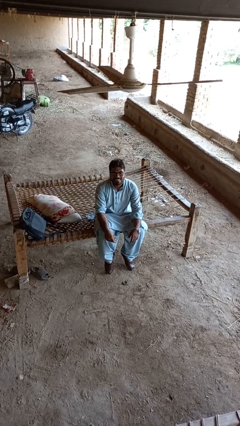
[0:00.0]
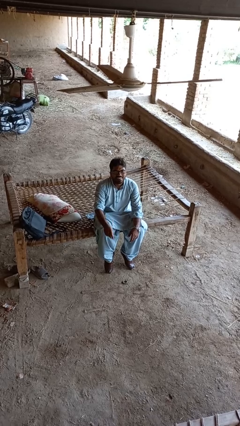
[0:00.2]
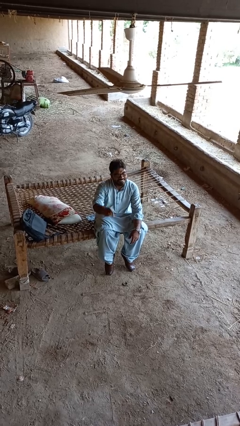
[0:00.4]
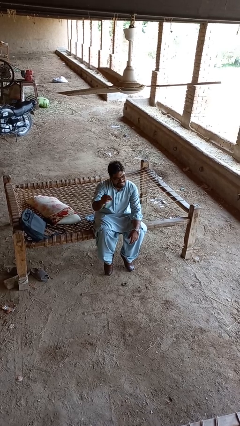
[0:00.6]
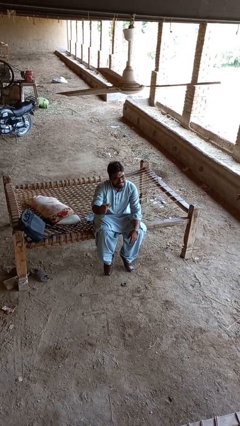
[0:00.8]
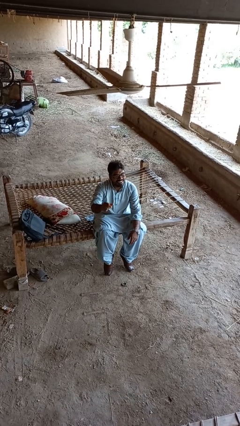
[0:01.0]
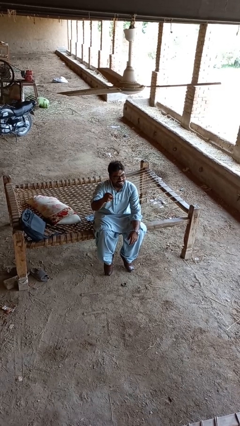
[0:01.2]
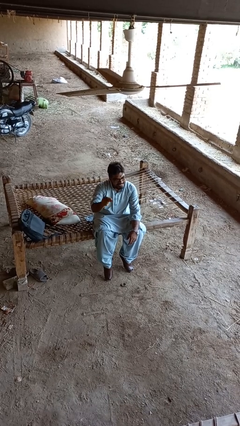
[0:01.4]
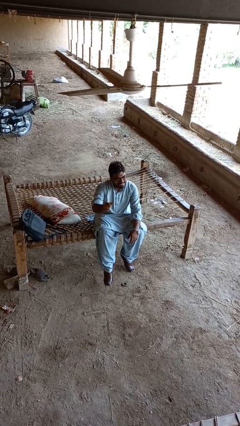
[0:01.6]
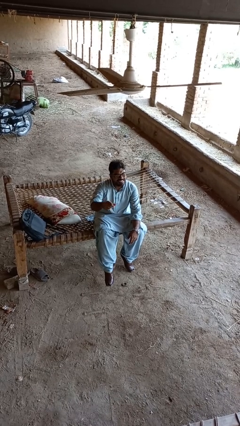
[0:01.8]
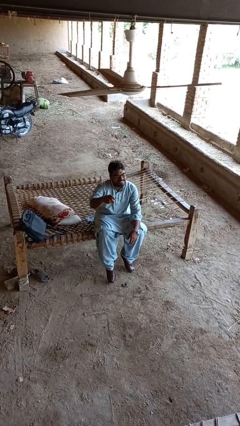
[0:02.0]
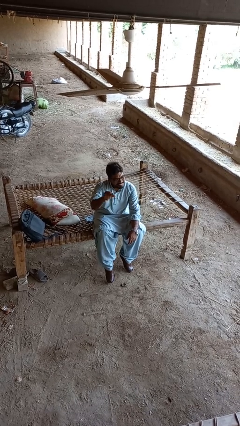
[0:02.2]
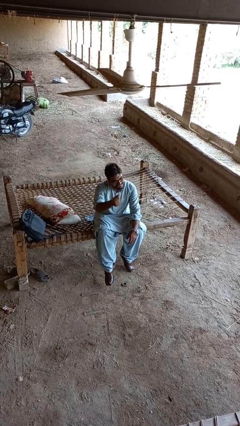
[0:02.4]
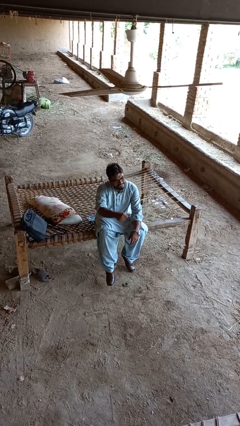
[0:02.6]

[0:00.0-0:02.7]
person snaps fingers

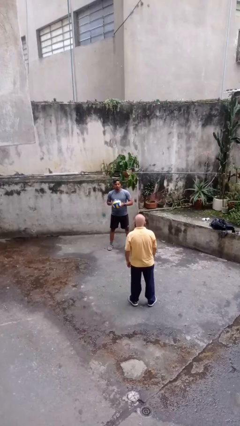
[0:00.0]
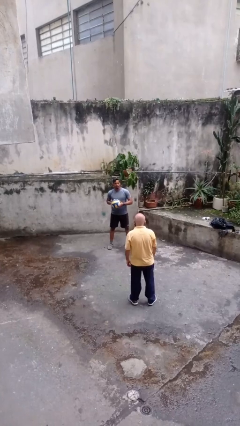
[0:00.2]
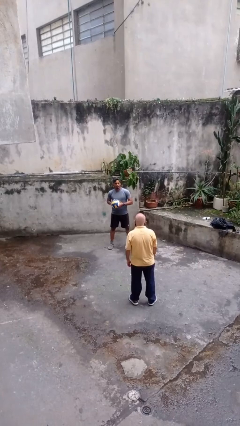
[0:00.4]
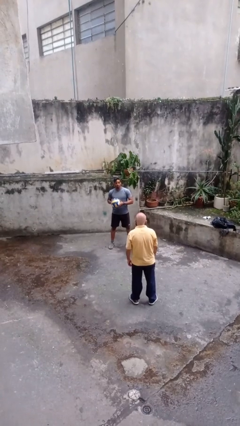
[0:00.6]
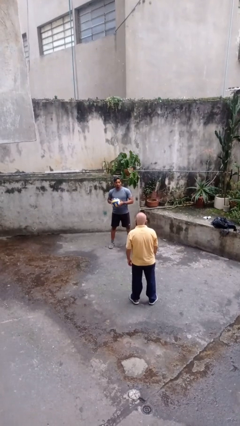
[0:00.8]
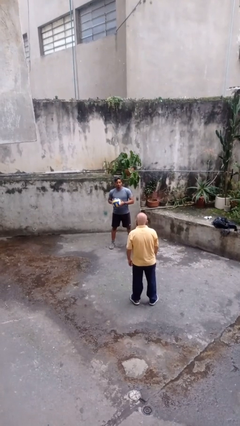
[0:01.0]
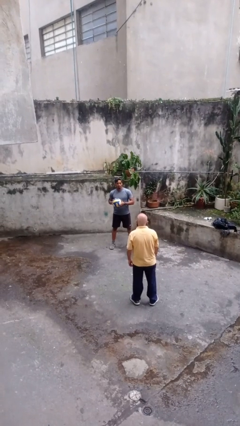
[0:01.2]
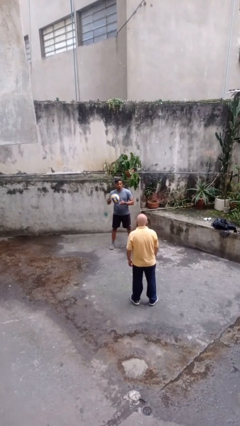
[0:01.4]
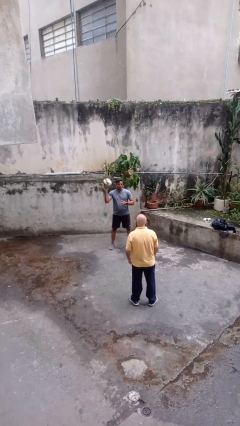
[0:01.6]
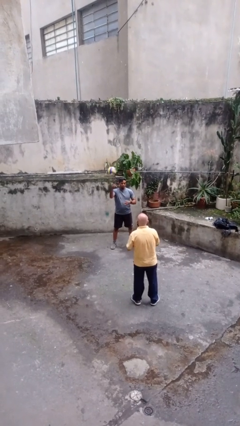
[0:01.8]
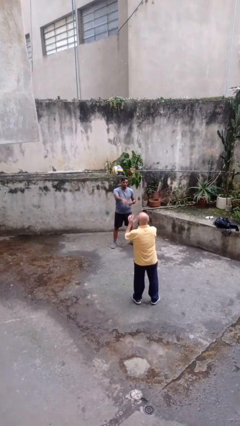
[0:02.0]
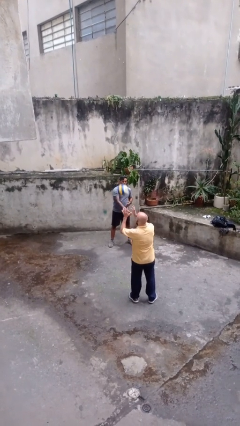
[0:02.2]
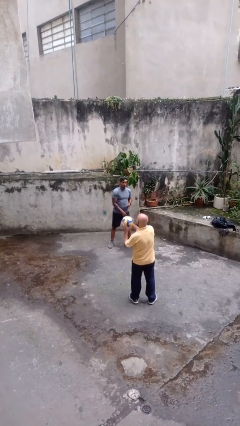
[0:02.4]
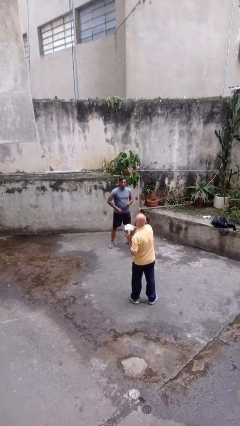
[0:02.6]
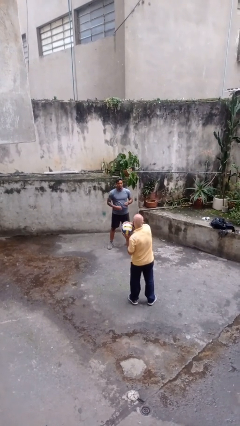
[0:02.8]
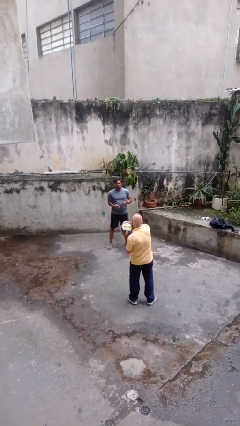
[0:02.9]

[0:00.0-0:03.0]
person throws object to person

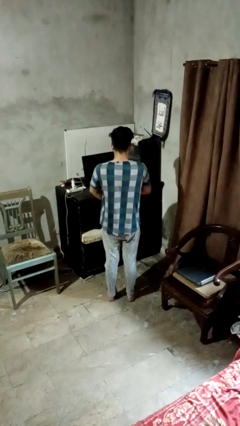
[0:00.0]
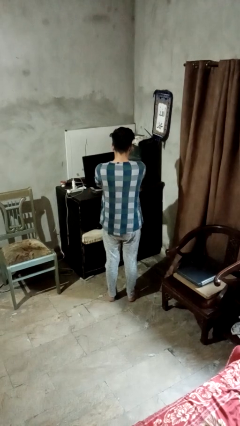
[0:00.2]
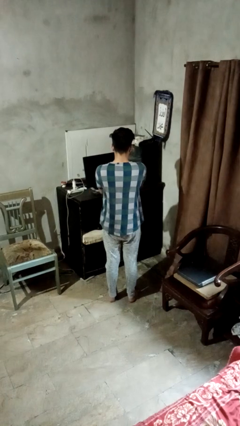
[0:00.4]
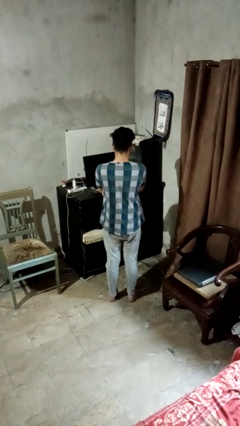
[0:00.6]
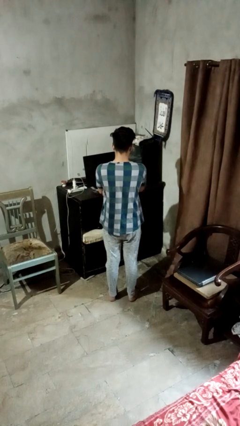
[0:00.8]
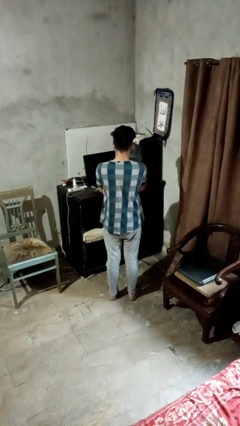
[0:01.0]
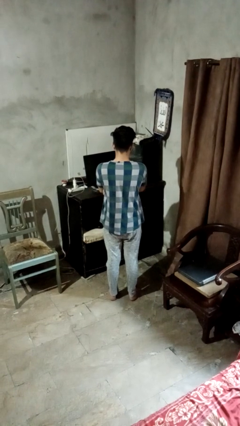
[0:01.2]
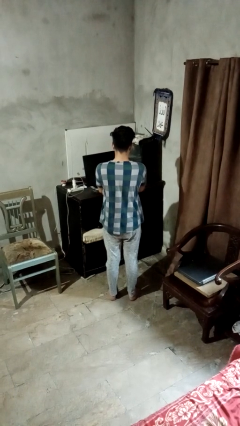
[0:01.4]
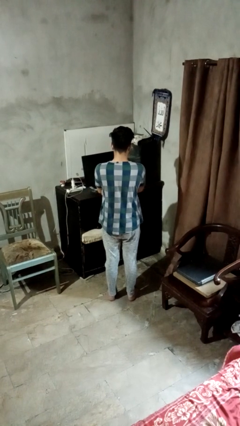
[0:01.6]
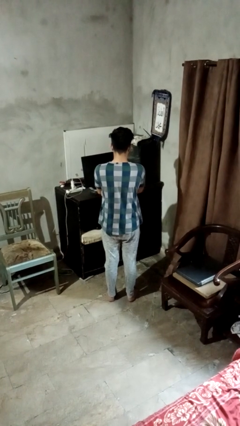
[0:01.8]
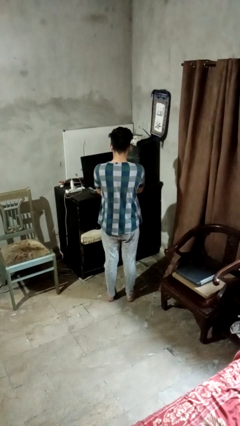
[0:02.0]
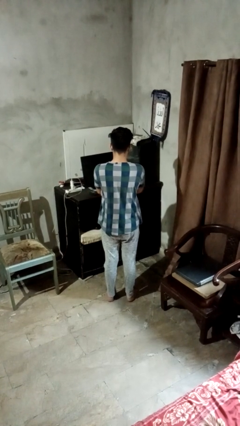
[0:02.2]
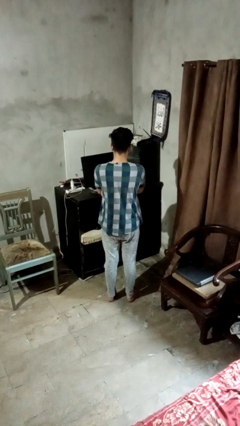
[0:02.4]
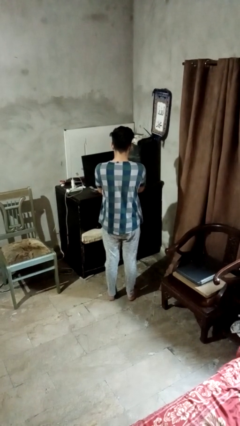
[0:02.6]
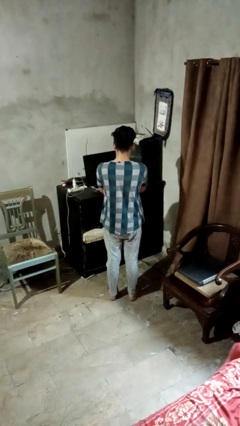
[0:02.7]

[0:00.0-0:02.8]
person crosses arms

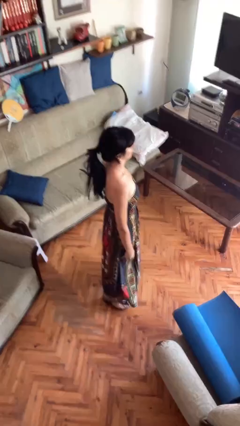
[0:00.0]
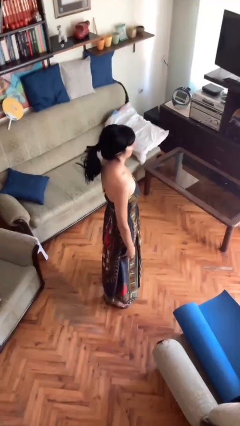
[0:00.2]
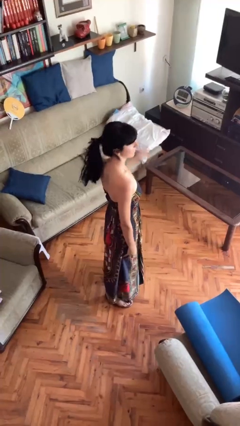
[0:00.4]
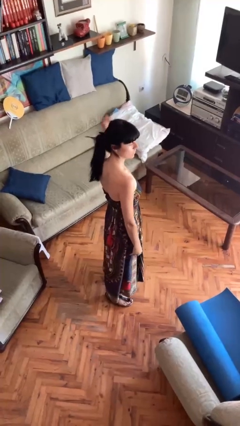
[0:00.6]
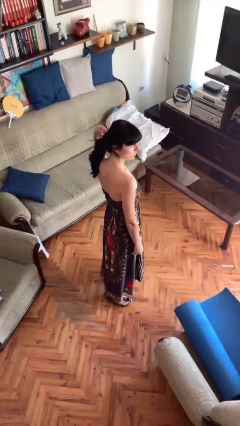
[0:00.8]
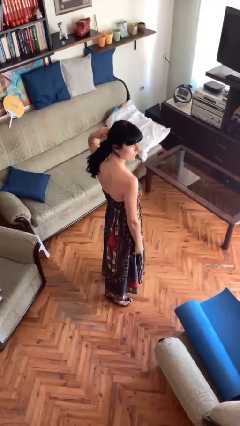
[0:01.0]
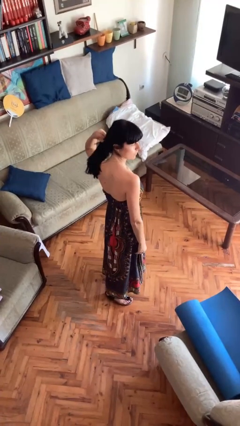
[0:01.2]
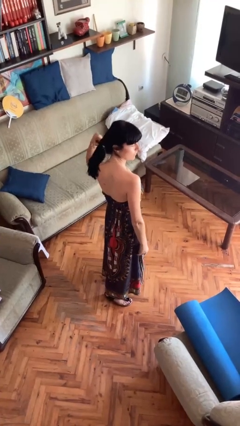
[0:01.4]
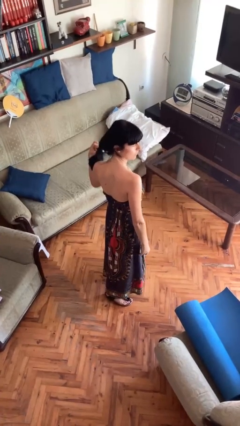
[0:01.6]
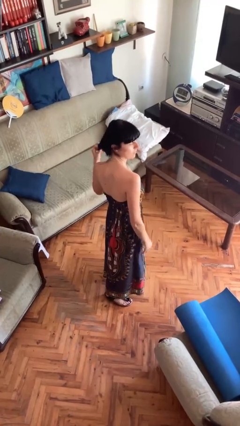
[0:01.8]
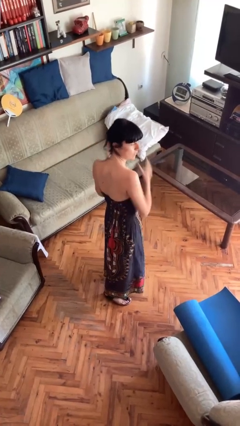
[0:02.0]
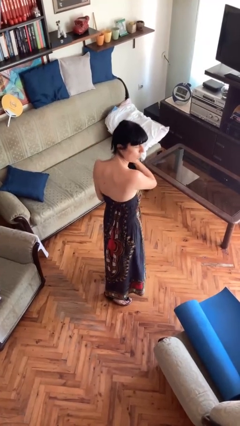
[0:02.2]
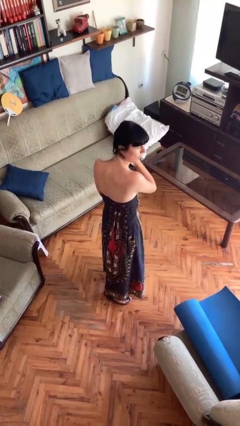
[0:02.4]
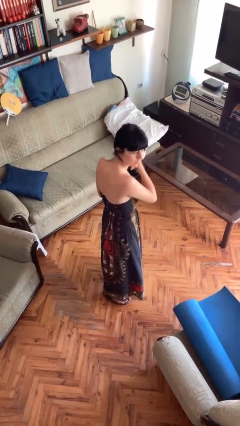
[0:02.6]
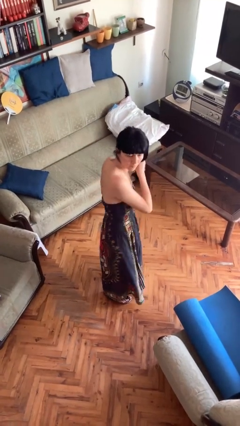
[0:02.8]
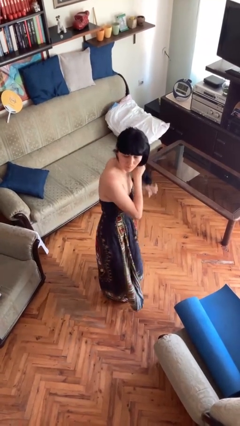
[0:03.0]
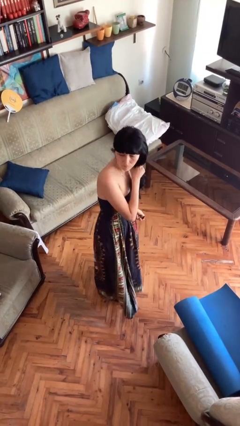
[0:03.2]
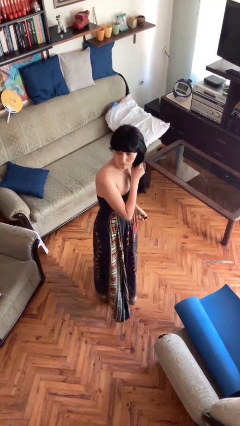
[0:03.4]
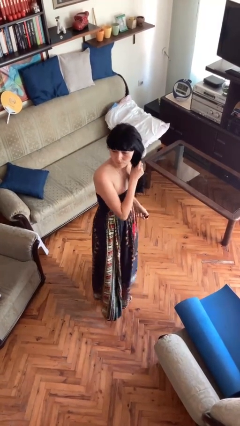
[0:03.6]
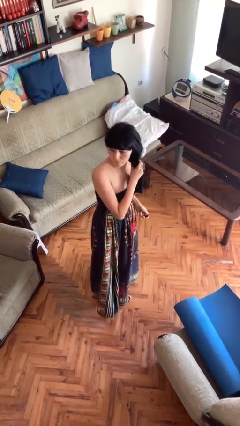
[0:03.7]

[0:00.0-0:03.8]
person takes off hairtie

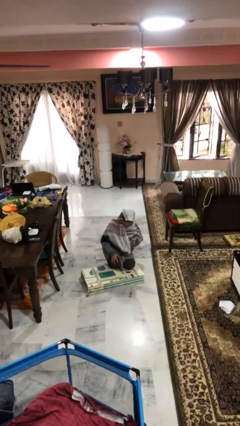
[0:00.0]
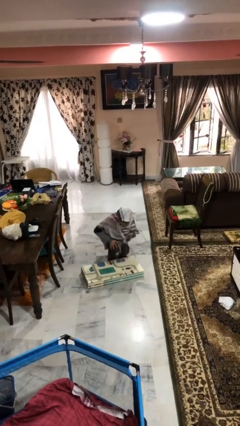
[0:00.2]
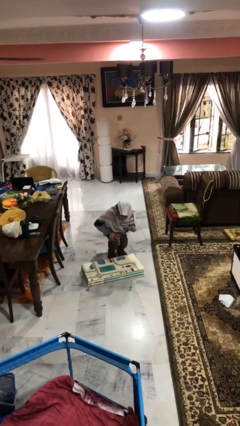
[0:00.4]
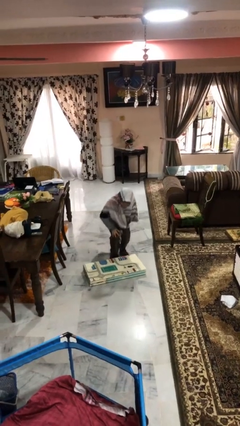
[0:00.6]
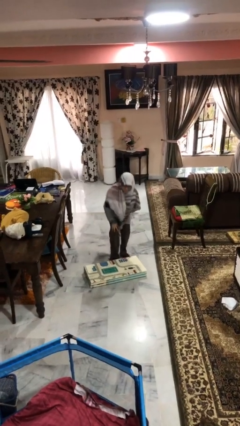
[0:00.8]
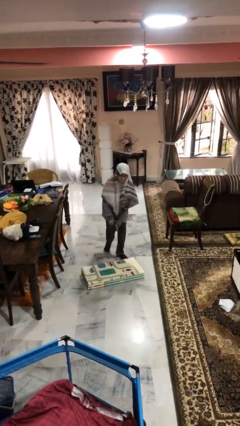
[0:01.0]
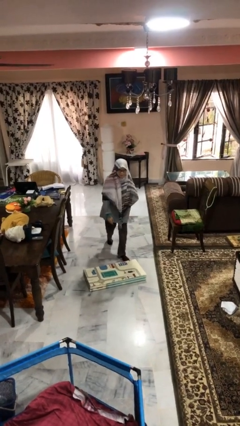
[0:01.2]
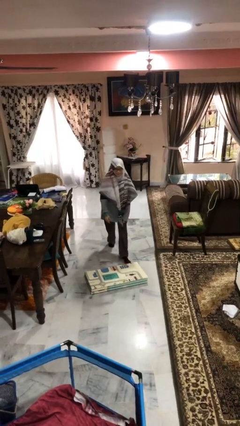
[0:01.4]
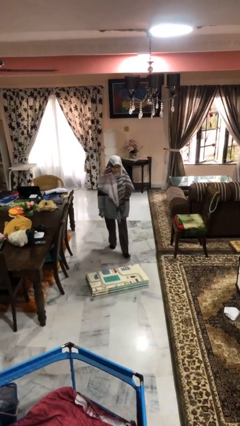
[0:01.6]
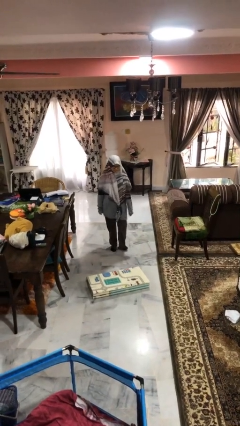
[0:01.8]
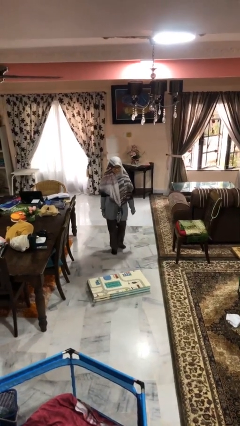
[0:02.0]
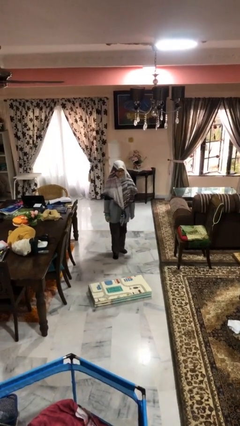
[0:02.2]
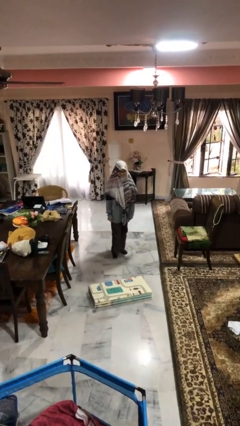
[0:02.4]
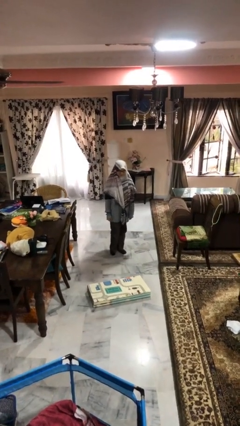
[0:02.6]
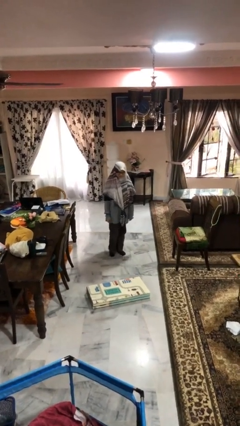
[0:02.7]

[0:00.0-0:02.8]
person stands up from floor

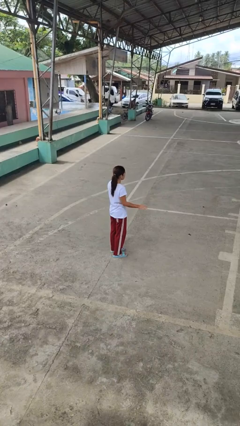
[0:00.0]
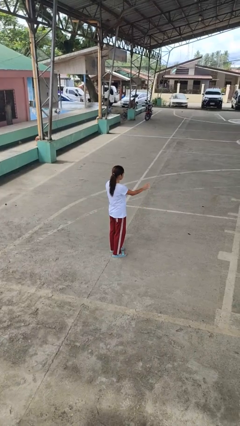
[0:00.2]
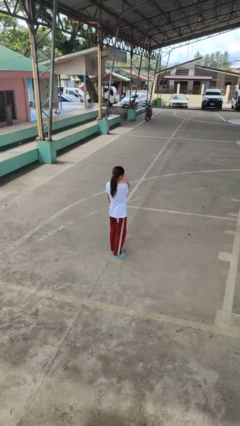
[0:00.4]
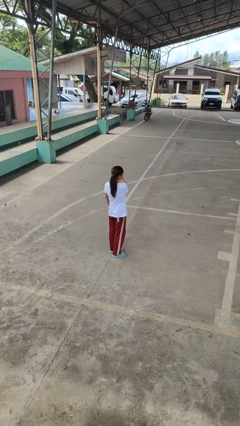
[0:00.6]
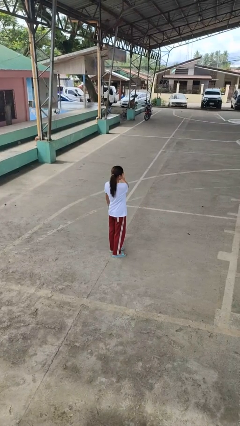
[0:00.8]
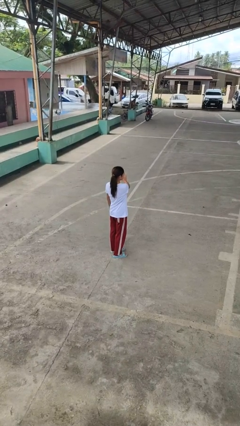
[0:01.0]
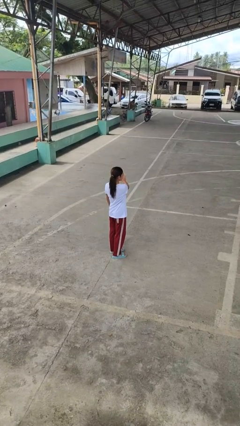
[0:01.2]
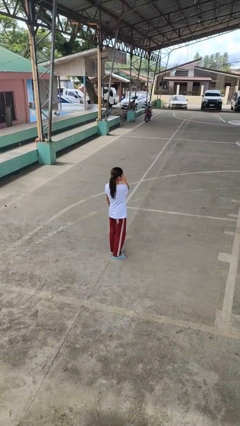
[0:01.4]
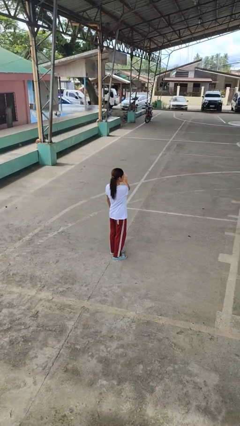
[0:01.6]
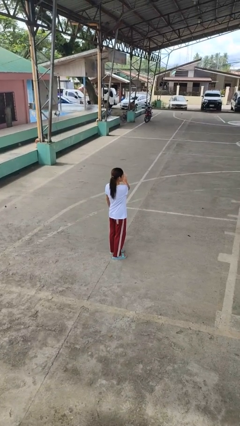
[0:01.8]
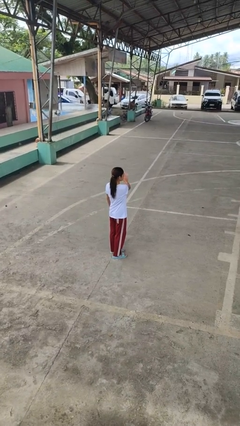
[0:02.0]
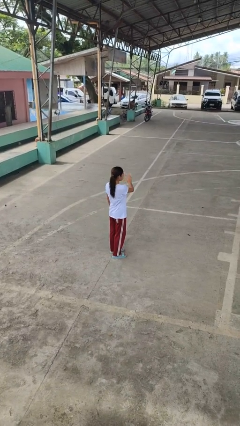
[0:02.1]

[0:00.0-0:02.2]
person gestures swipe left
